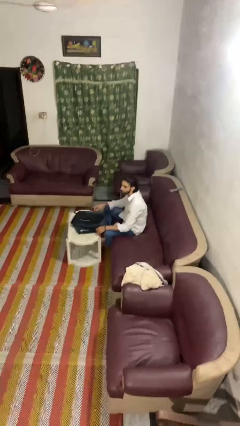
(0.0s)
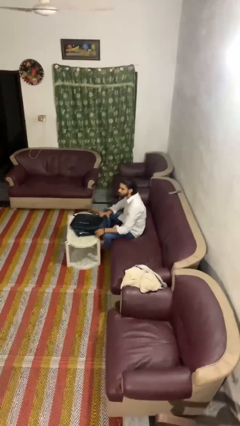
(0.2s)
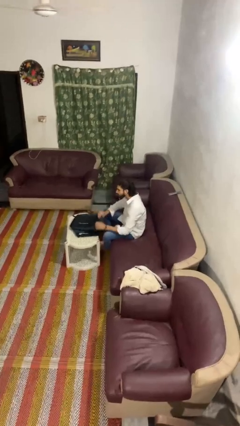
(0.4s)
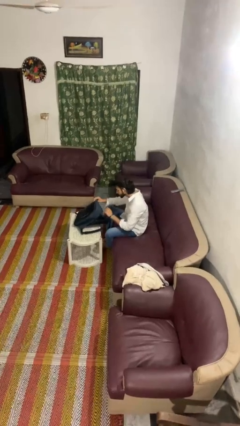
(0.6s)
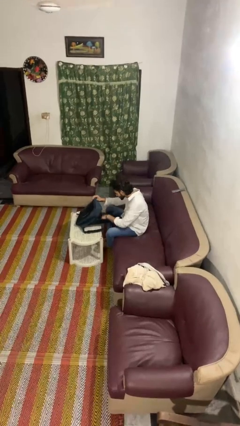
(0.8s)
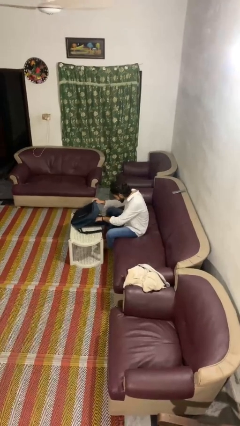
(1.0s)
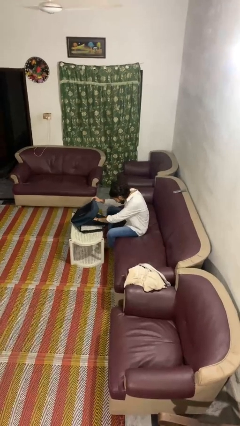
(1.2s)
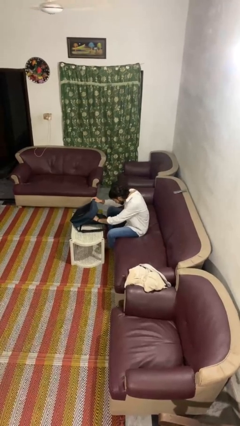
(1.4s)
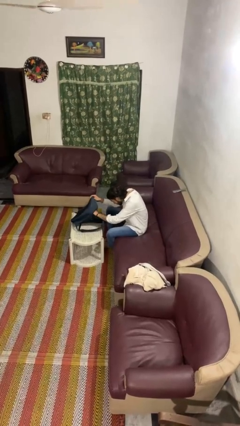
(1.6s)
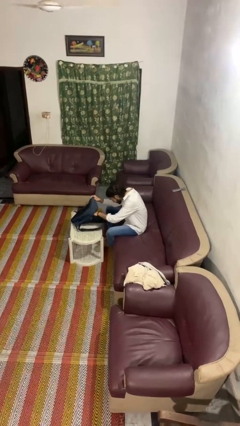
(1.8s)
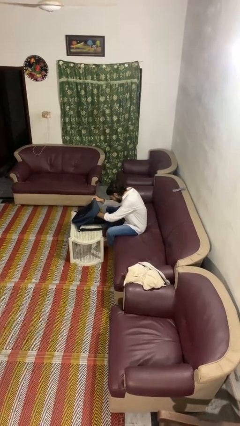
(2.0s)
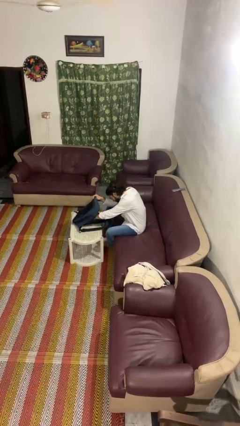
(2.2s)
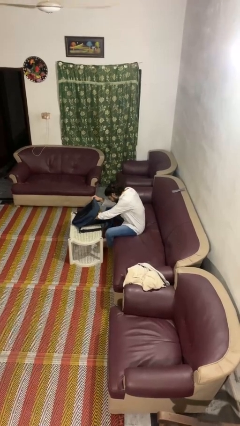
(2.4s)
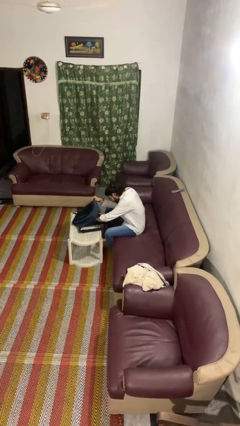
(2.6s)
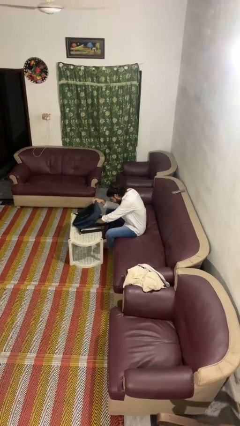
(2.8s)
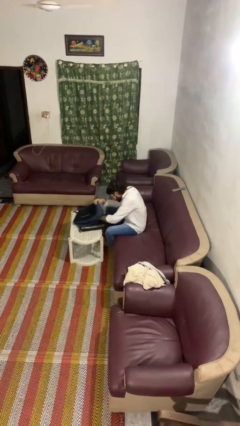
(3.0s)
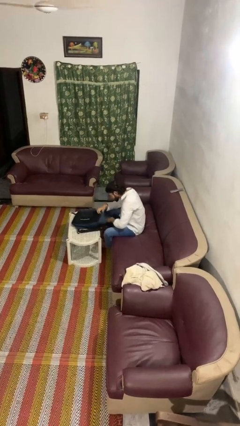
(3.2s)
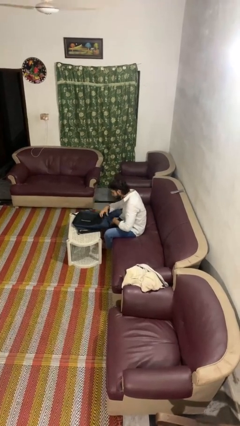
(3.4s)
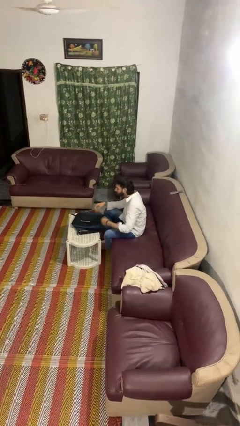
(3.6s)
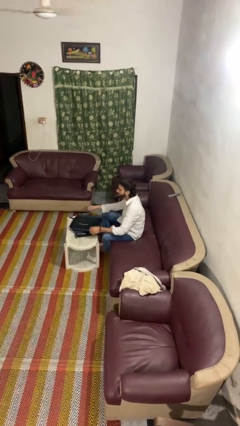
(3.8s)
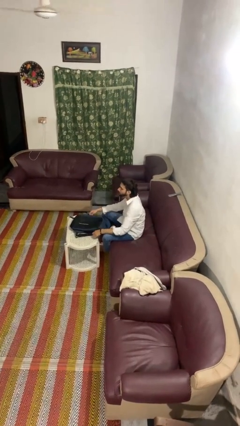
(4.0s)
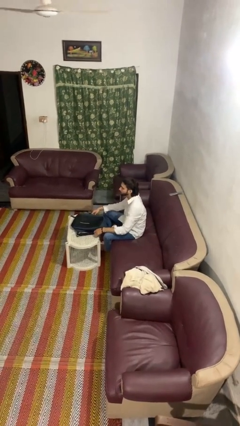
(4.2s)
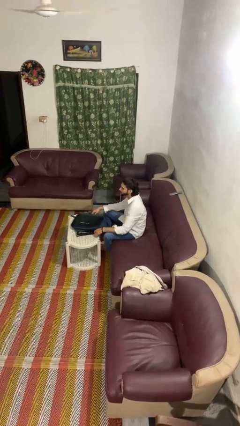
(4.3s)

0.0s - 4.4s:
person searches in bag

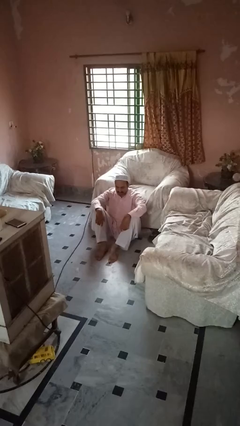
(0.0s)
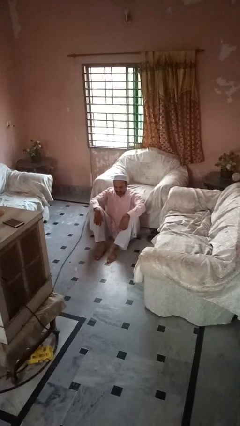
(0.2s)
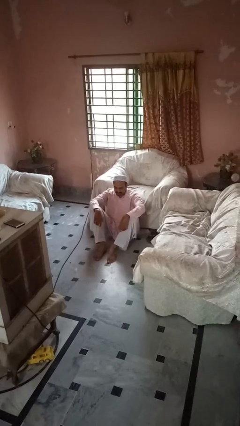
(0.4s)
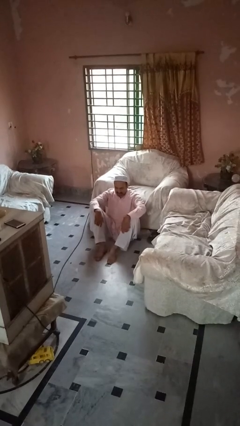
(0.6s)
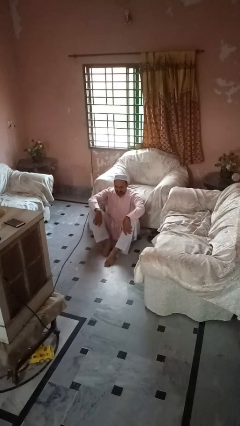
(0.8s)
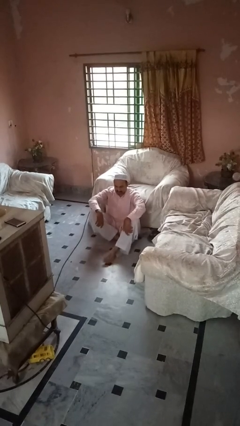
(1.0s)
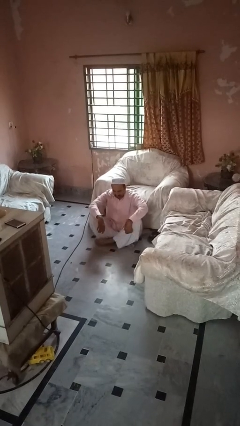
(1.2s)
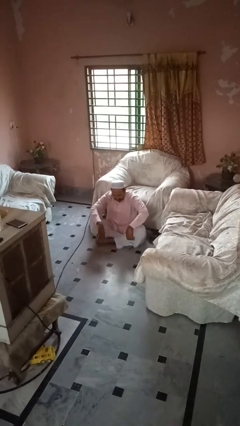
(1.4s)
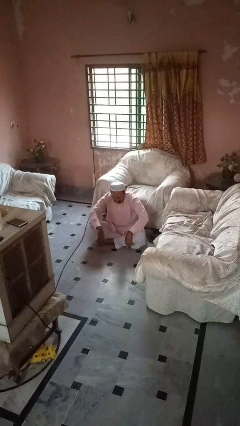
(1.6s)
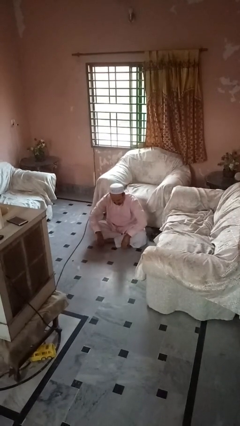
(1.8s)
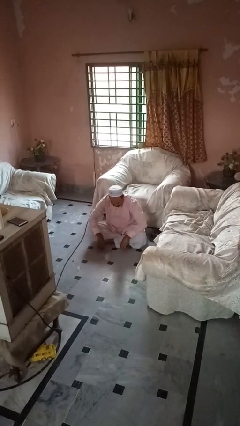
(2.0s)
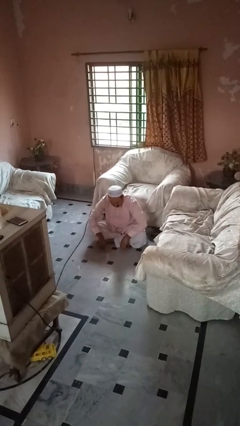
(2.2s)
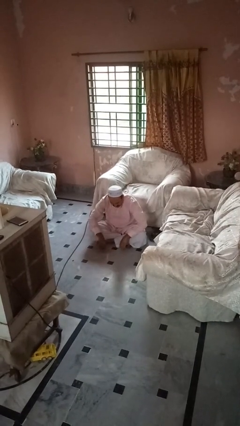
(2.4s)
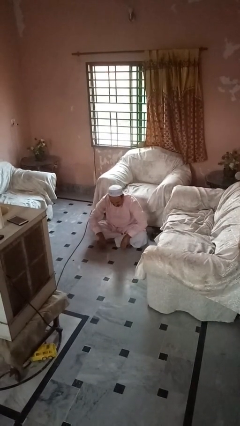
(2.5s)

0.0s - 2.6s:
person crosses legs

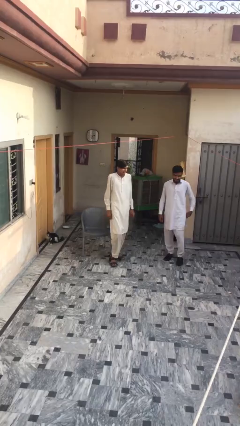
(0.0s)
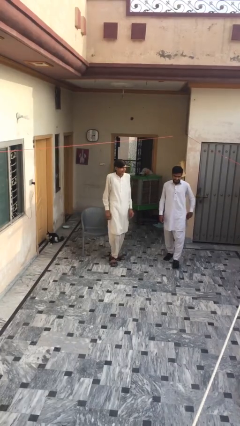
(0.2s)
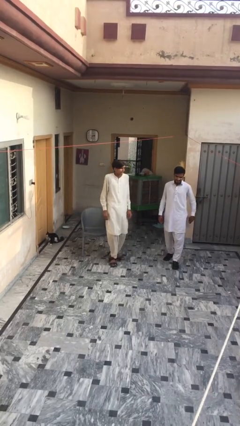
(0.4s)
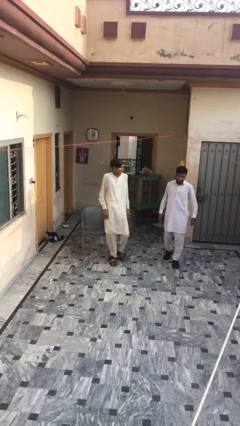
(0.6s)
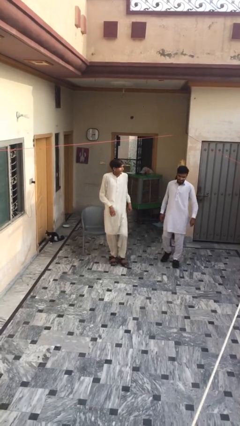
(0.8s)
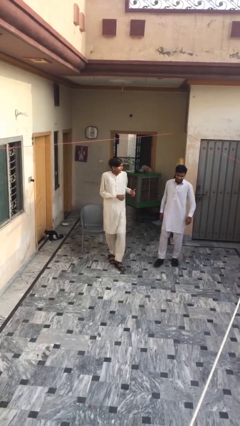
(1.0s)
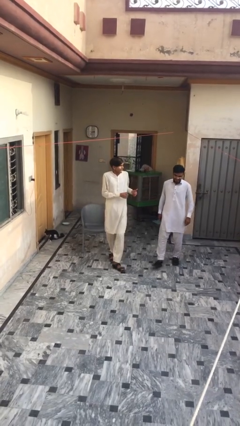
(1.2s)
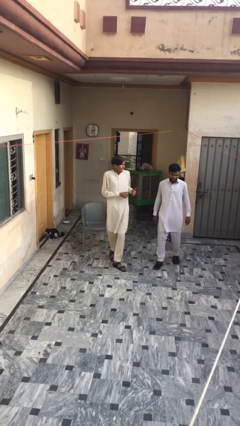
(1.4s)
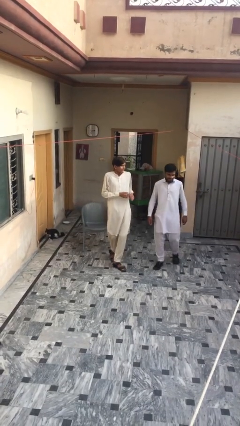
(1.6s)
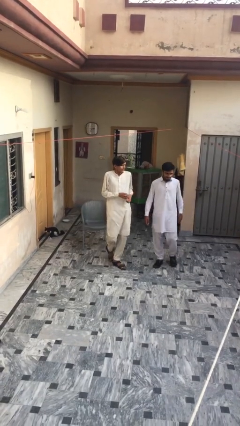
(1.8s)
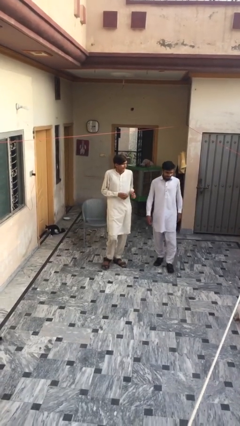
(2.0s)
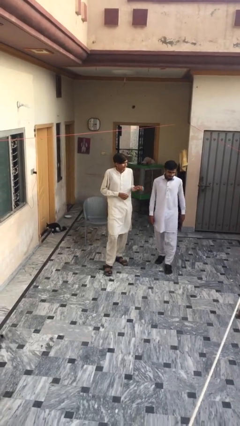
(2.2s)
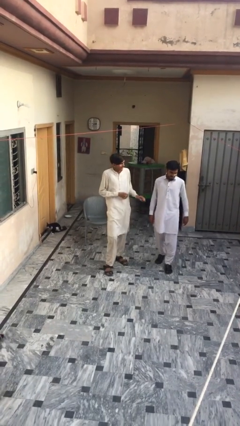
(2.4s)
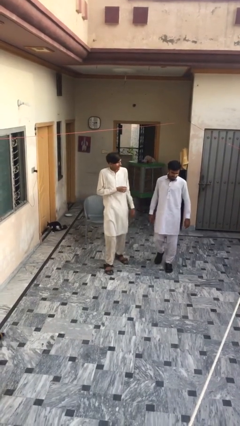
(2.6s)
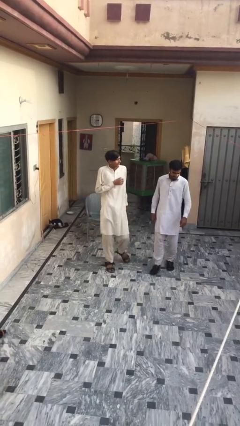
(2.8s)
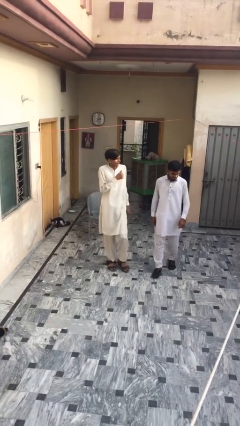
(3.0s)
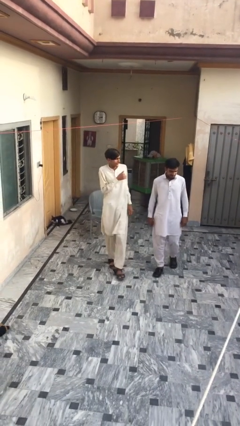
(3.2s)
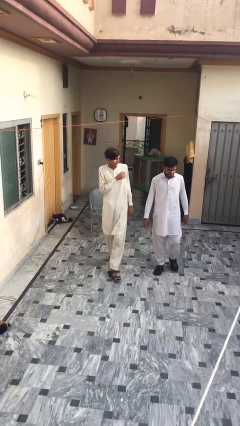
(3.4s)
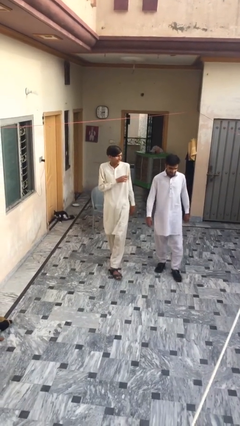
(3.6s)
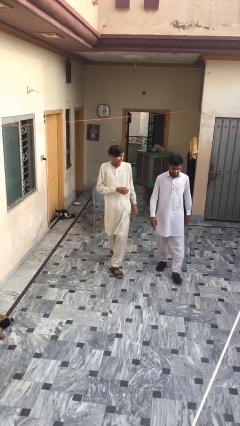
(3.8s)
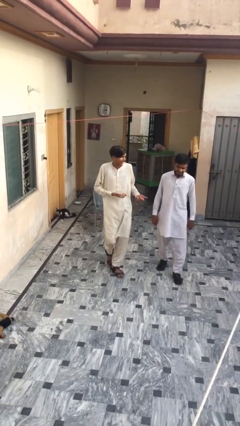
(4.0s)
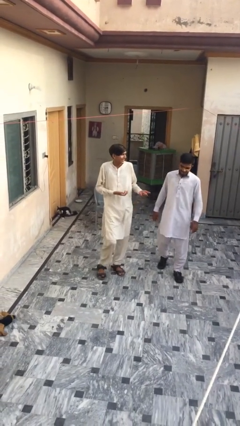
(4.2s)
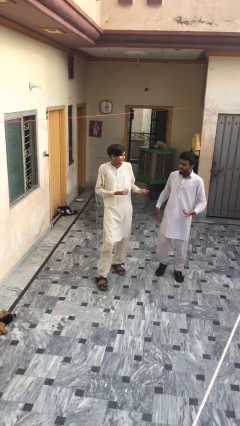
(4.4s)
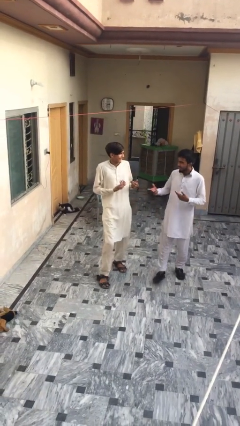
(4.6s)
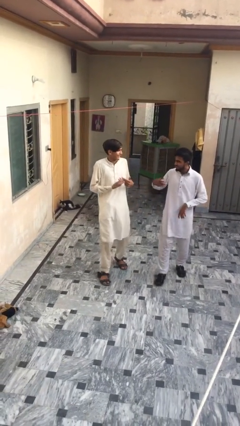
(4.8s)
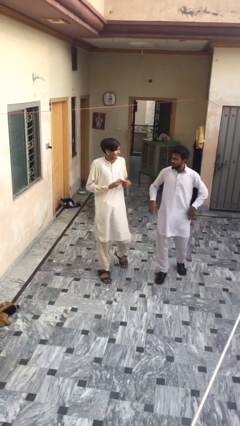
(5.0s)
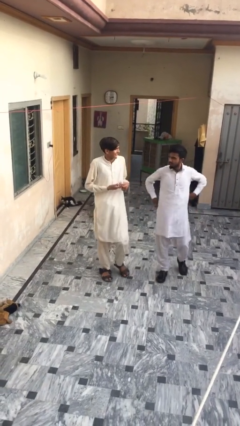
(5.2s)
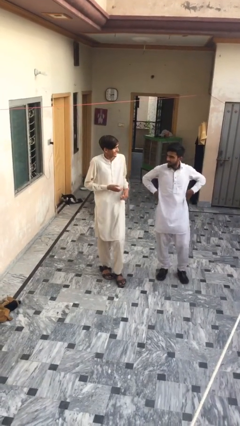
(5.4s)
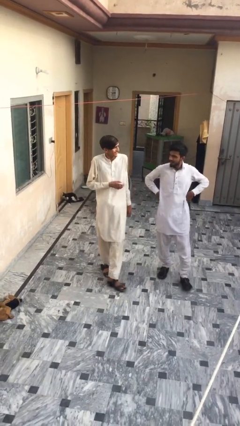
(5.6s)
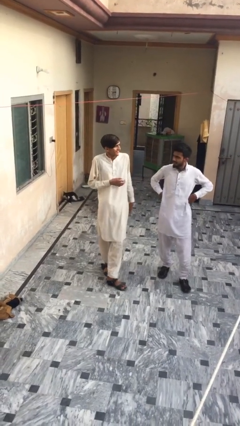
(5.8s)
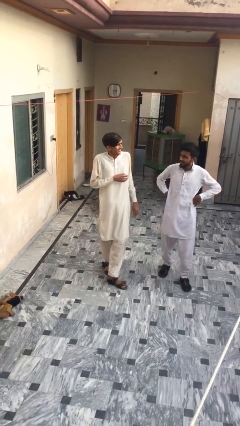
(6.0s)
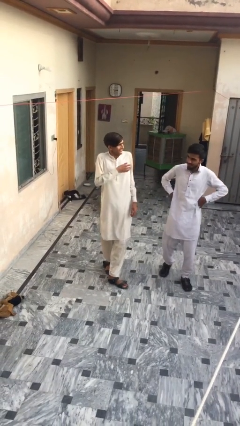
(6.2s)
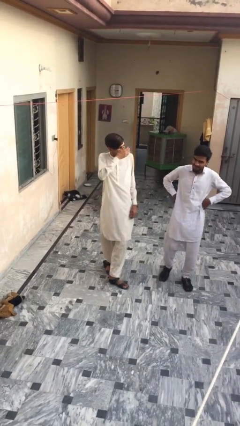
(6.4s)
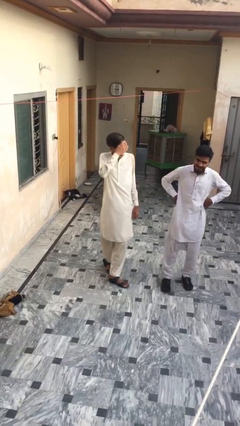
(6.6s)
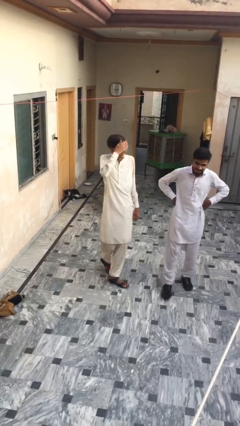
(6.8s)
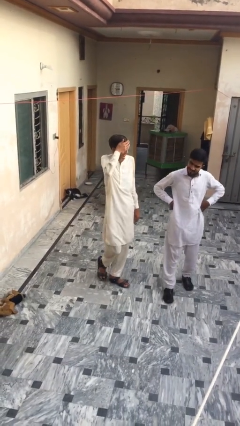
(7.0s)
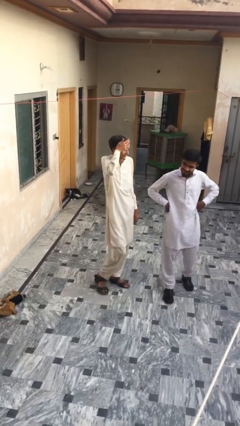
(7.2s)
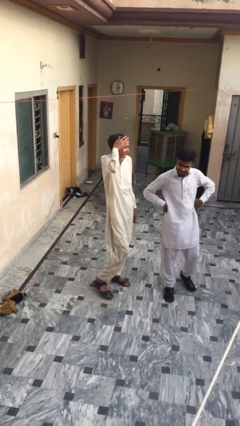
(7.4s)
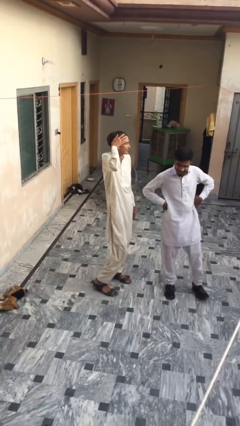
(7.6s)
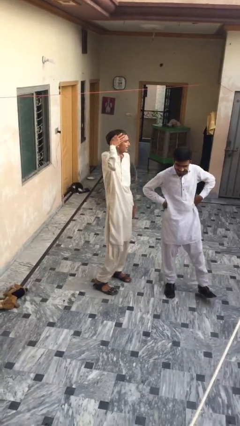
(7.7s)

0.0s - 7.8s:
person talks to person

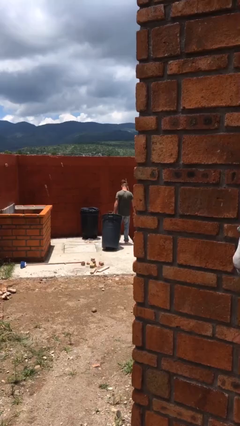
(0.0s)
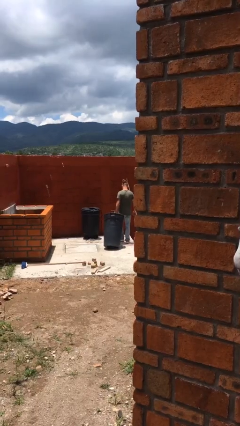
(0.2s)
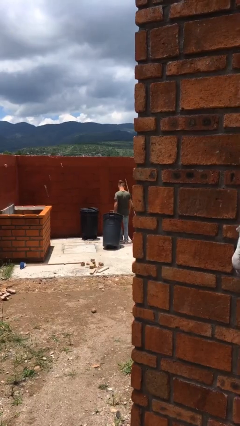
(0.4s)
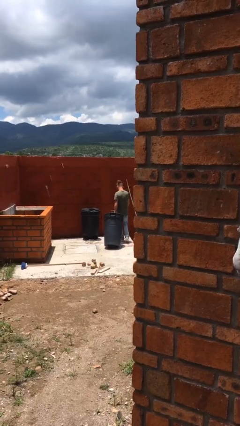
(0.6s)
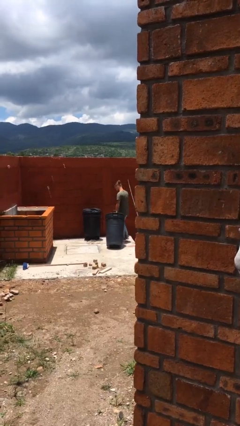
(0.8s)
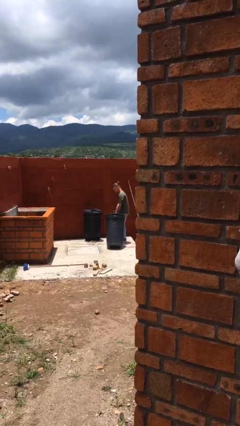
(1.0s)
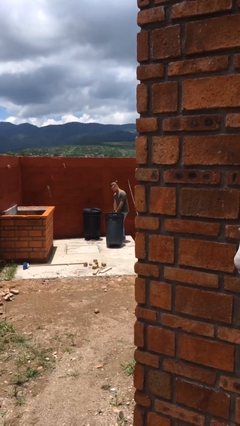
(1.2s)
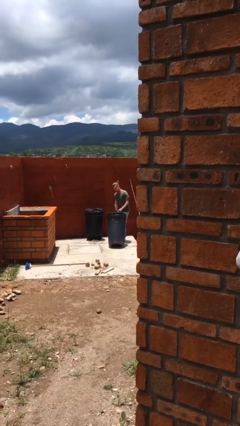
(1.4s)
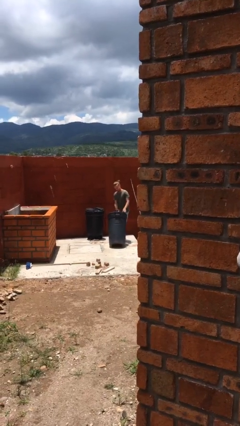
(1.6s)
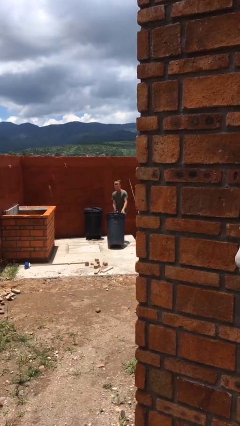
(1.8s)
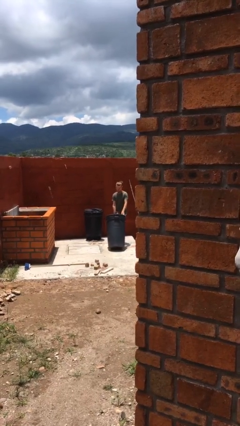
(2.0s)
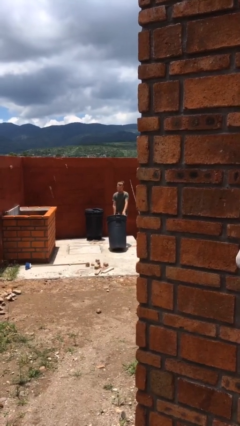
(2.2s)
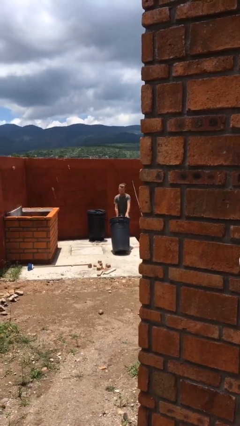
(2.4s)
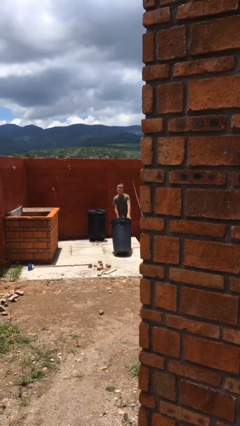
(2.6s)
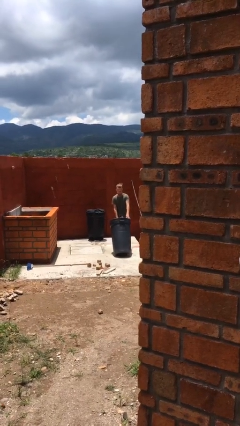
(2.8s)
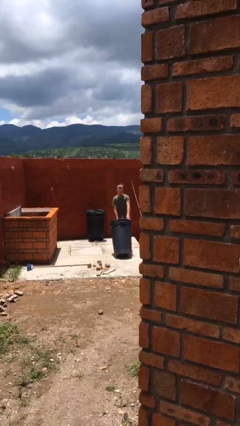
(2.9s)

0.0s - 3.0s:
person pushes wheeled trashcan

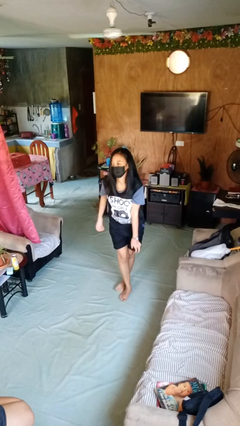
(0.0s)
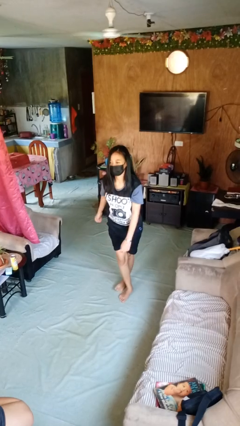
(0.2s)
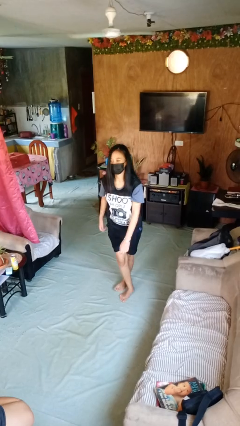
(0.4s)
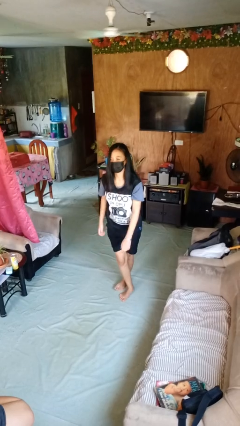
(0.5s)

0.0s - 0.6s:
person stands up from floor
